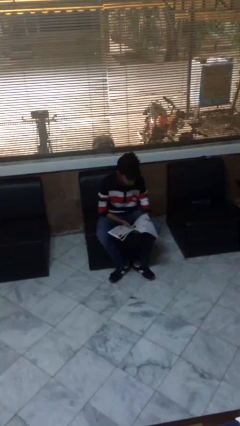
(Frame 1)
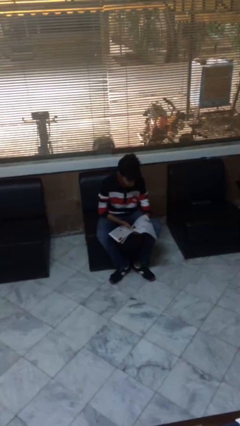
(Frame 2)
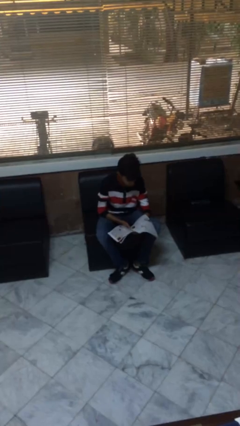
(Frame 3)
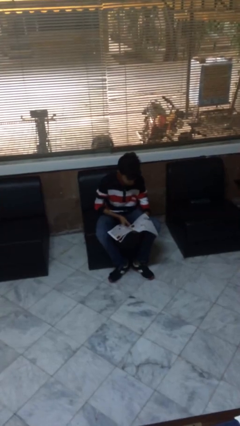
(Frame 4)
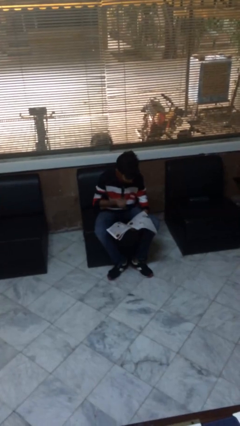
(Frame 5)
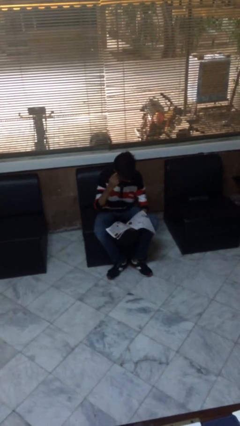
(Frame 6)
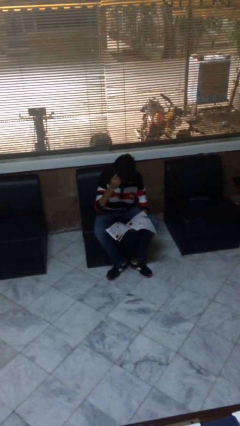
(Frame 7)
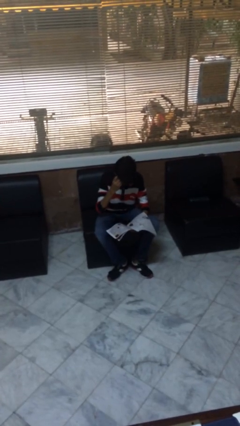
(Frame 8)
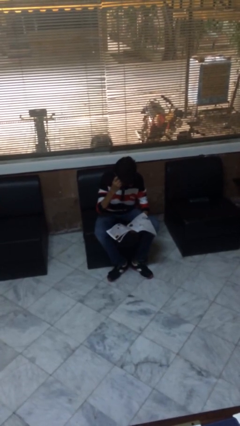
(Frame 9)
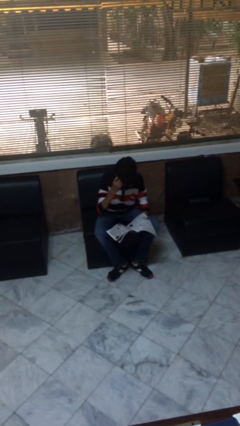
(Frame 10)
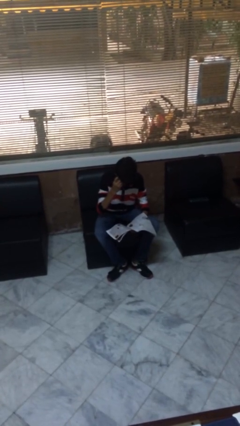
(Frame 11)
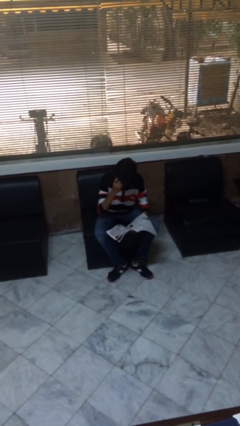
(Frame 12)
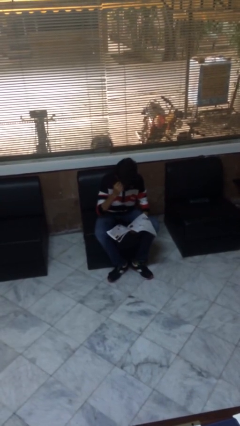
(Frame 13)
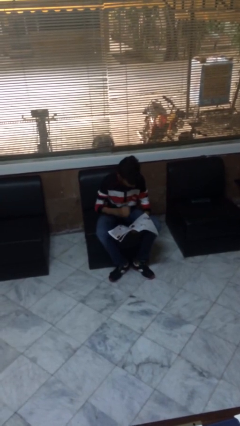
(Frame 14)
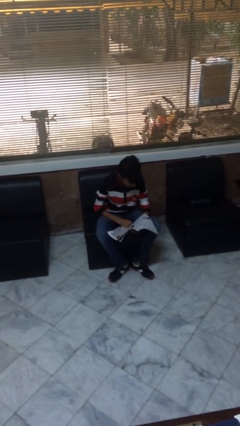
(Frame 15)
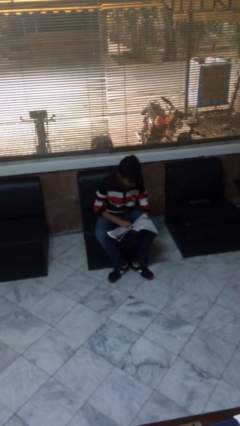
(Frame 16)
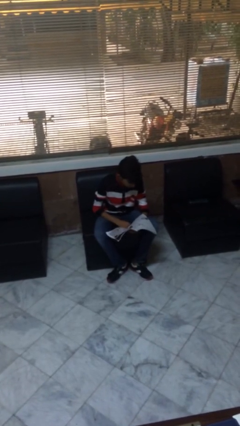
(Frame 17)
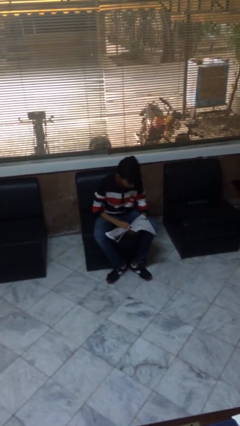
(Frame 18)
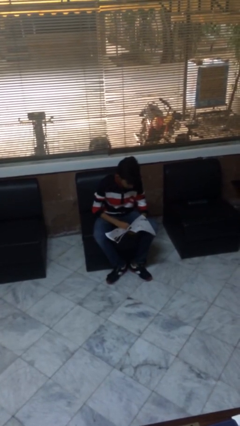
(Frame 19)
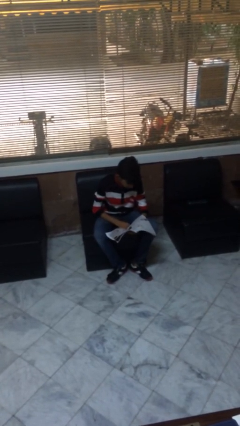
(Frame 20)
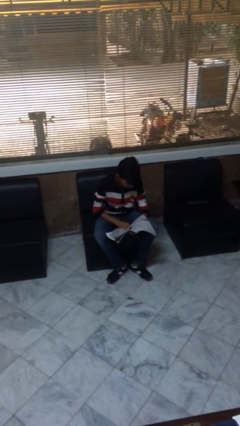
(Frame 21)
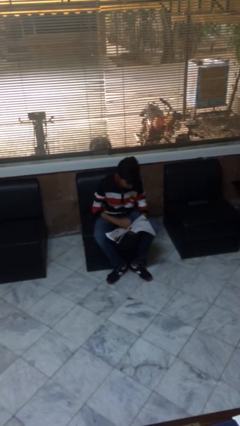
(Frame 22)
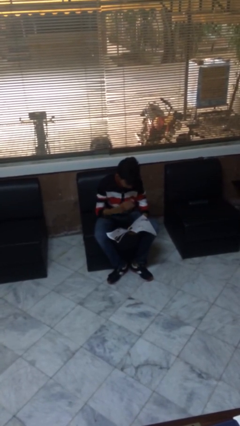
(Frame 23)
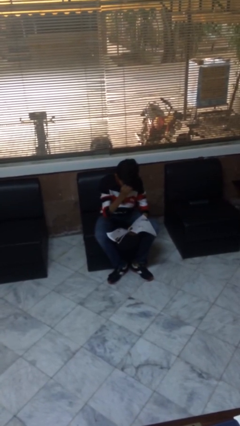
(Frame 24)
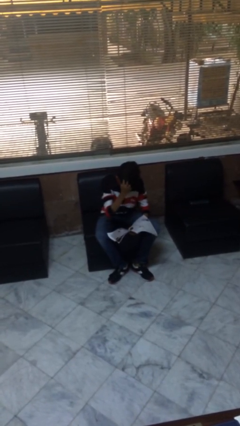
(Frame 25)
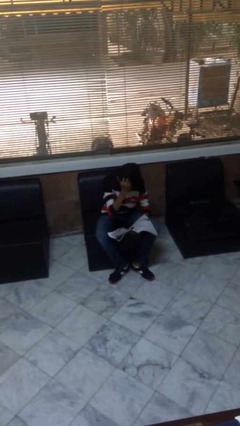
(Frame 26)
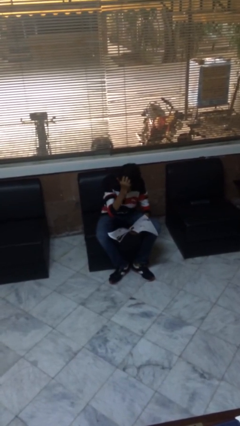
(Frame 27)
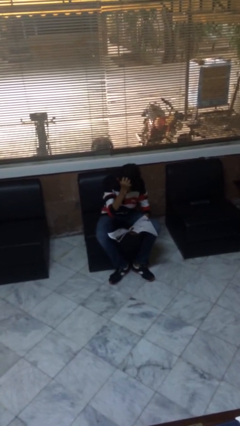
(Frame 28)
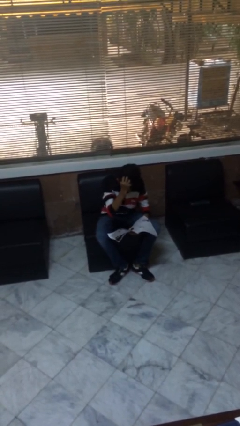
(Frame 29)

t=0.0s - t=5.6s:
person reads document

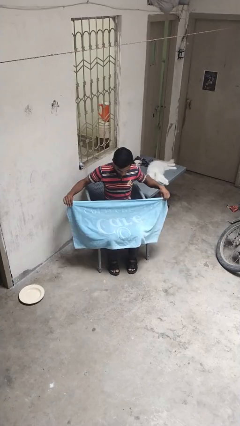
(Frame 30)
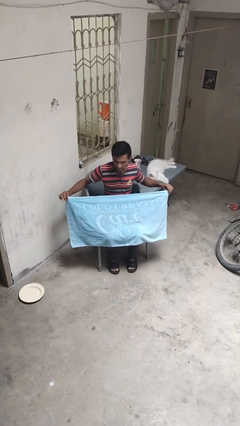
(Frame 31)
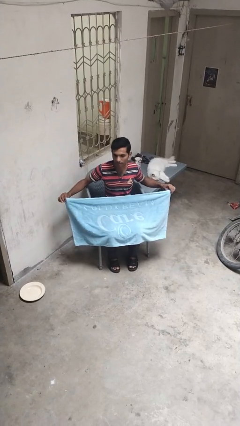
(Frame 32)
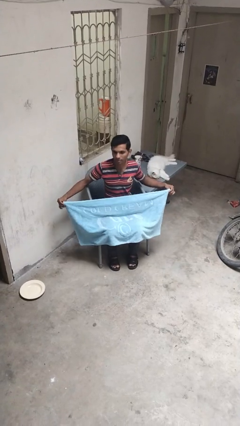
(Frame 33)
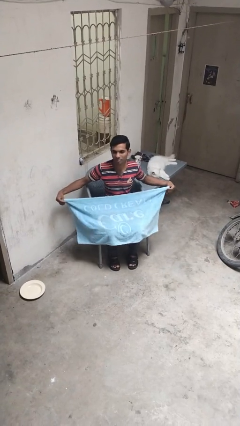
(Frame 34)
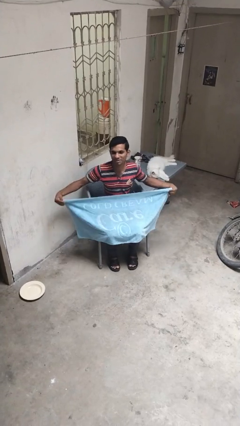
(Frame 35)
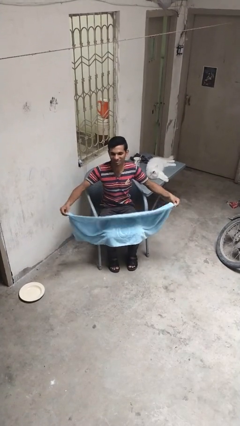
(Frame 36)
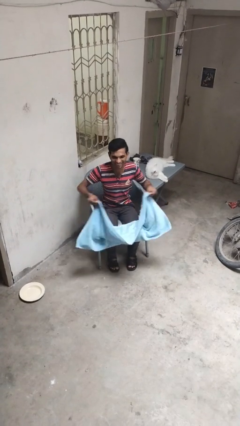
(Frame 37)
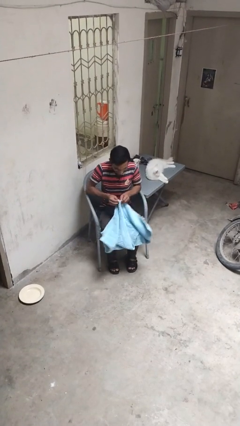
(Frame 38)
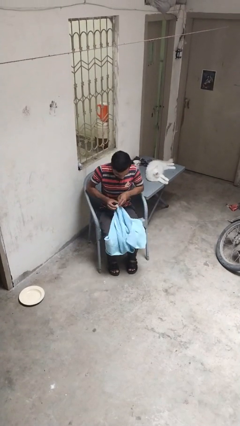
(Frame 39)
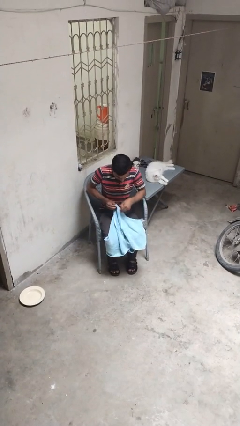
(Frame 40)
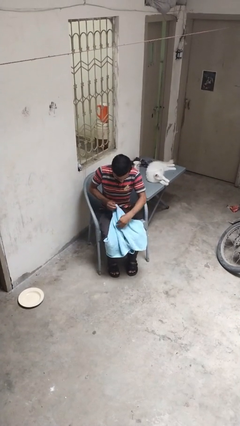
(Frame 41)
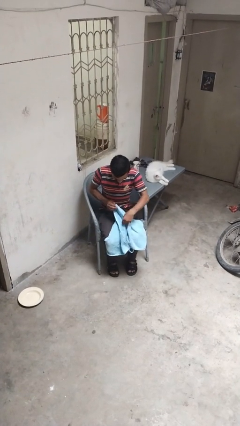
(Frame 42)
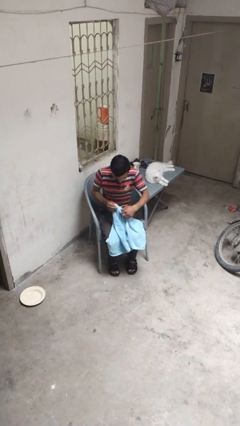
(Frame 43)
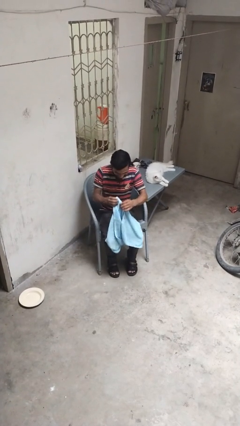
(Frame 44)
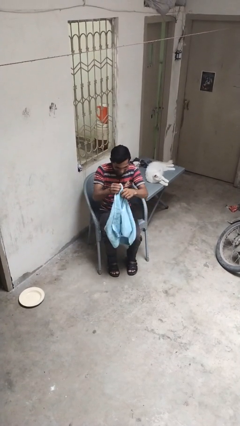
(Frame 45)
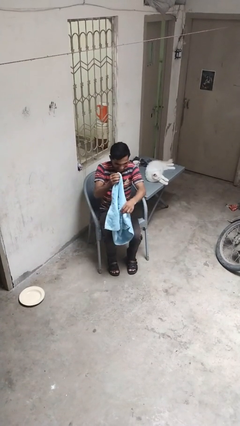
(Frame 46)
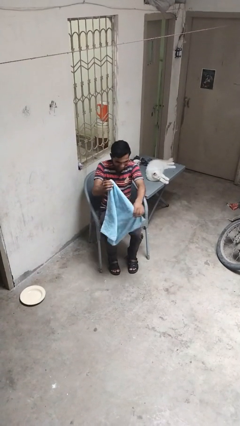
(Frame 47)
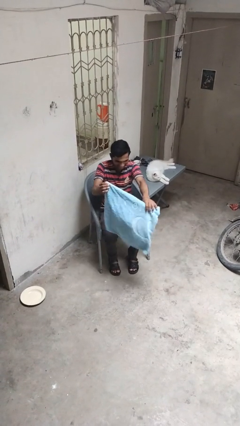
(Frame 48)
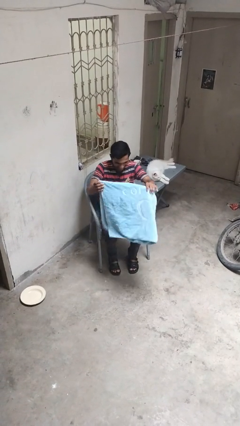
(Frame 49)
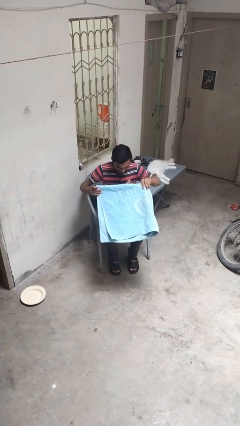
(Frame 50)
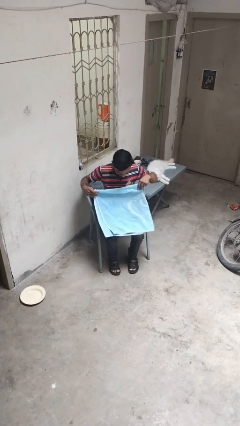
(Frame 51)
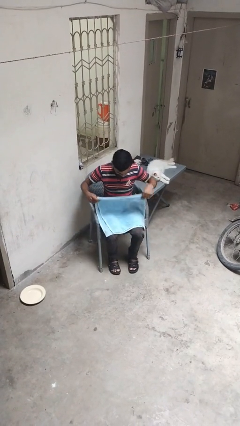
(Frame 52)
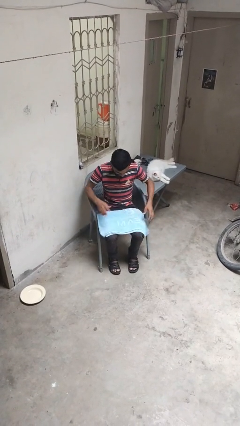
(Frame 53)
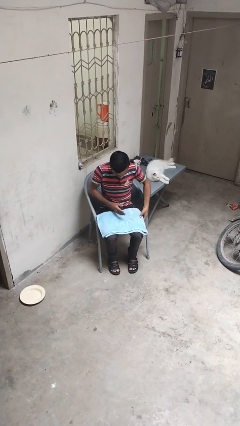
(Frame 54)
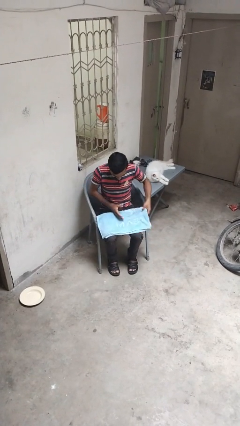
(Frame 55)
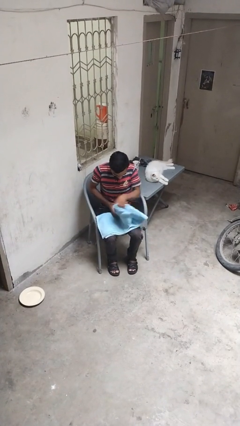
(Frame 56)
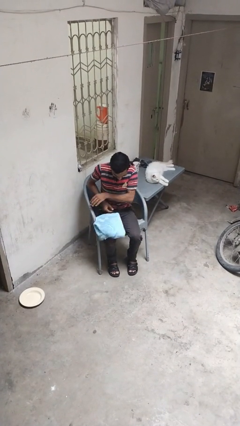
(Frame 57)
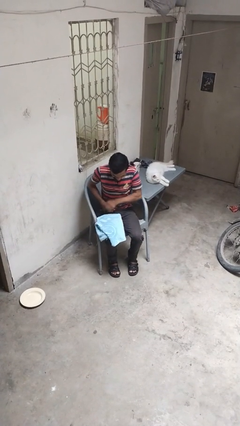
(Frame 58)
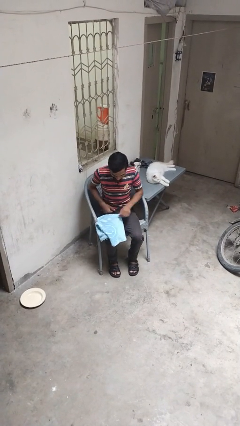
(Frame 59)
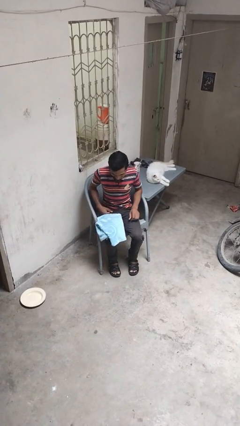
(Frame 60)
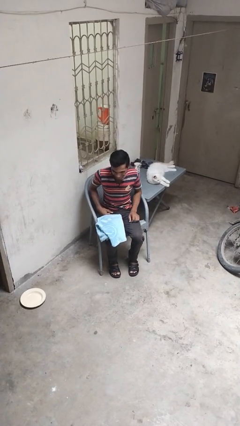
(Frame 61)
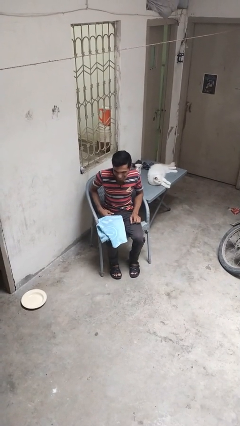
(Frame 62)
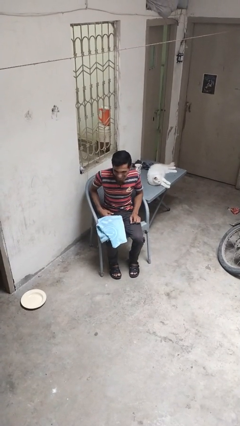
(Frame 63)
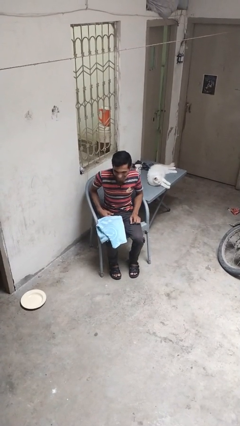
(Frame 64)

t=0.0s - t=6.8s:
person folds towel

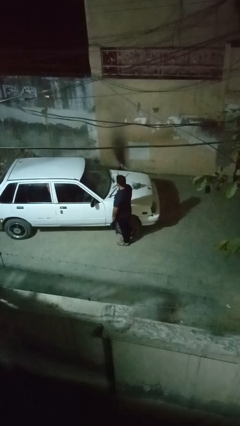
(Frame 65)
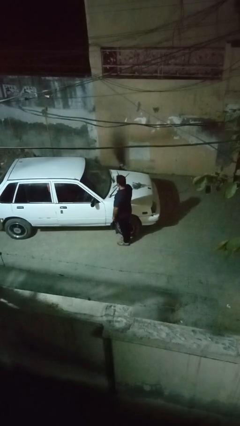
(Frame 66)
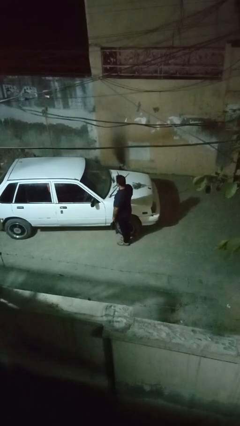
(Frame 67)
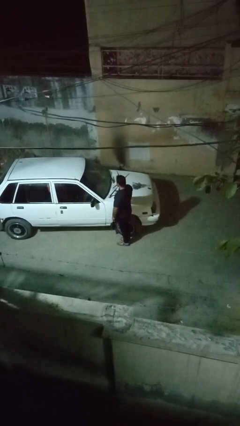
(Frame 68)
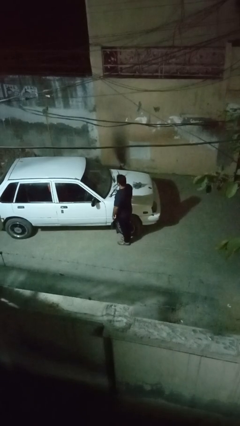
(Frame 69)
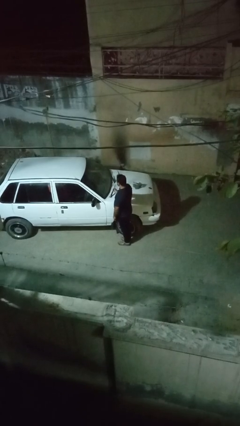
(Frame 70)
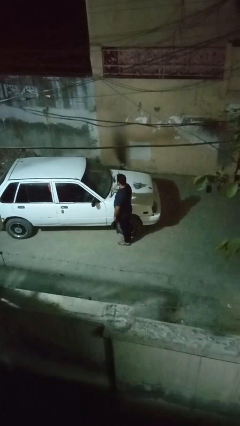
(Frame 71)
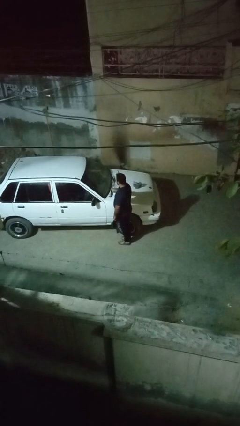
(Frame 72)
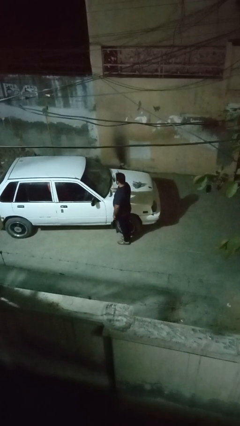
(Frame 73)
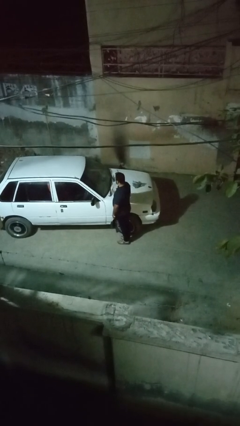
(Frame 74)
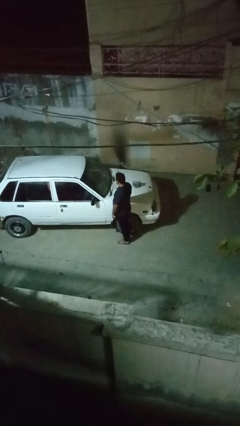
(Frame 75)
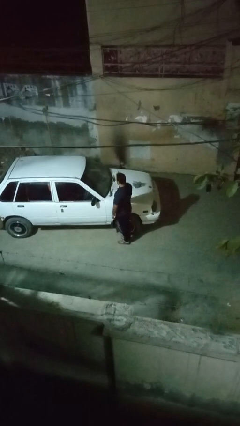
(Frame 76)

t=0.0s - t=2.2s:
person flips down car wipers

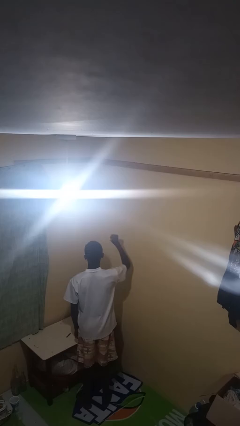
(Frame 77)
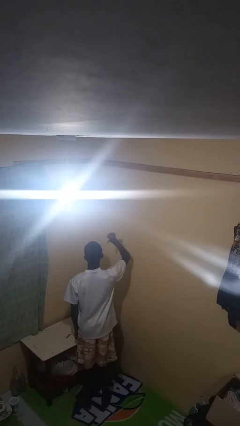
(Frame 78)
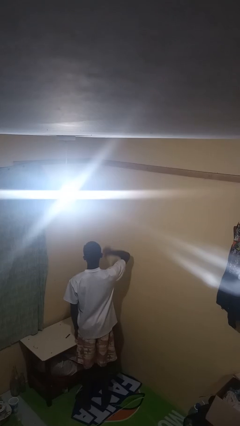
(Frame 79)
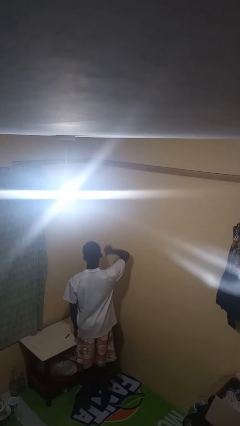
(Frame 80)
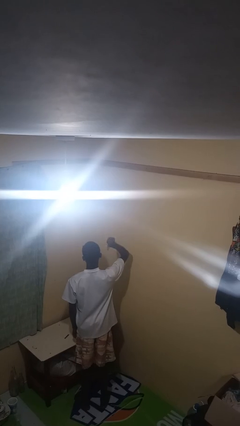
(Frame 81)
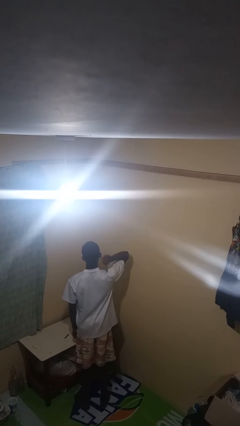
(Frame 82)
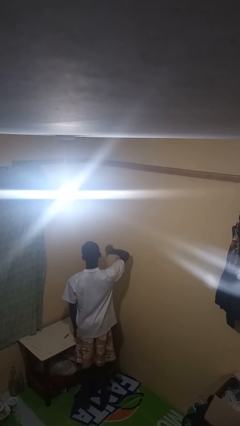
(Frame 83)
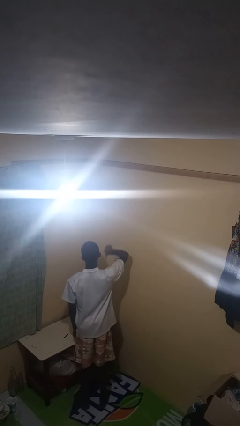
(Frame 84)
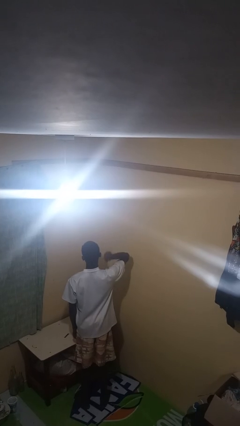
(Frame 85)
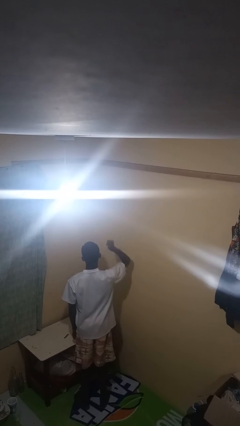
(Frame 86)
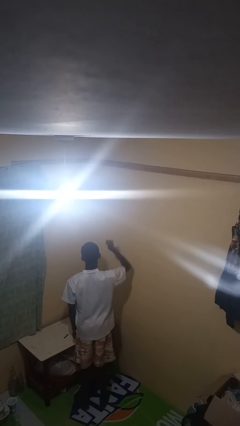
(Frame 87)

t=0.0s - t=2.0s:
person gestures behind me

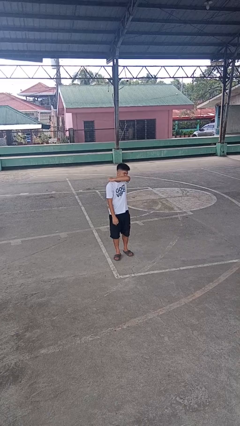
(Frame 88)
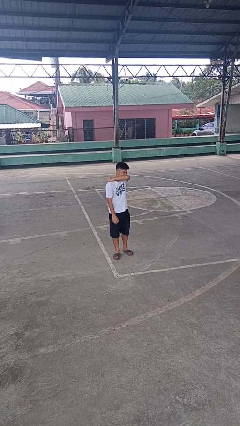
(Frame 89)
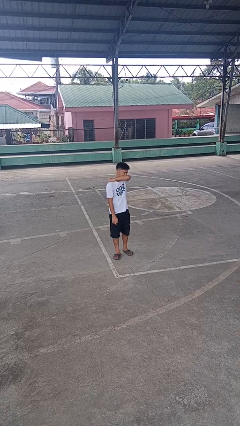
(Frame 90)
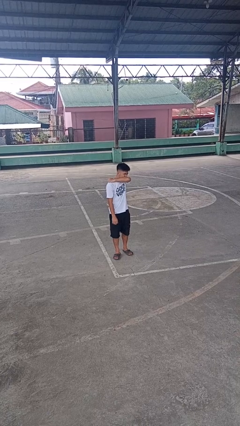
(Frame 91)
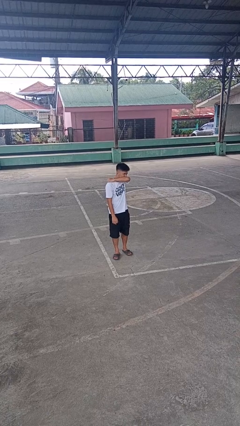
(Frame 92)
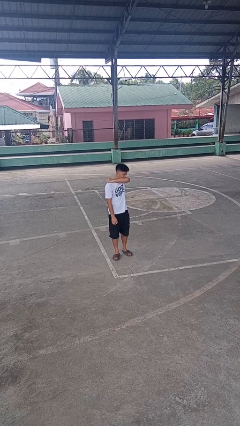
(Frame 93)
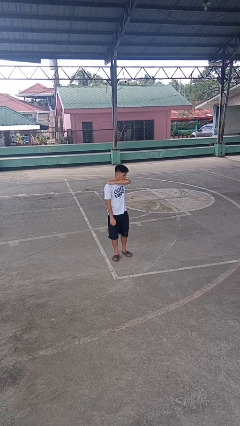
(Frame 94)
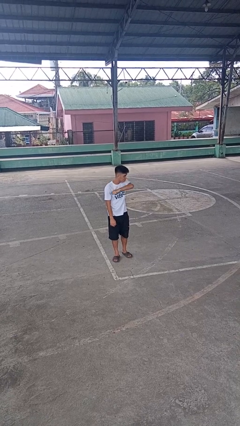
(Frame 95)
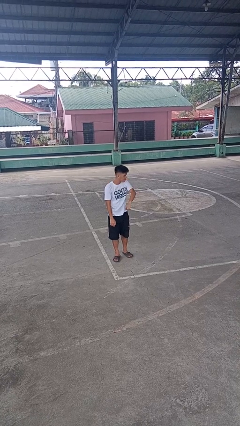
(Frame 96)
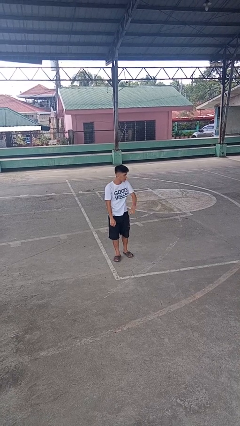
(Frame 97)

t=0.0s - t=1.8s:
person sneezes into arm
